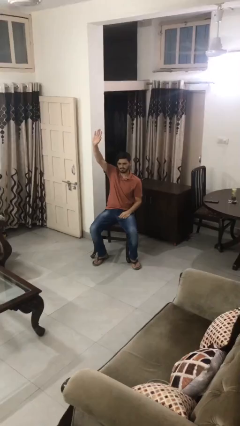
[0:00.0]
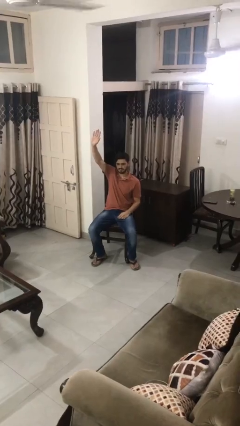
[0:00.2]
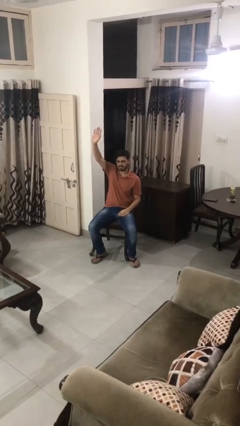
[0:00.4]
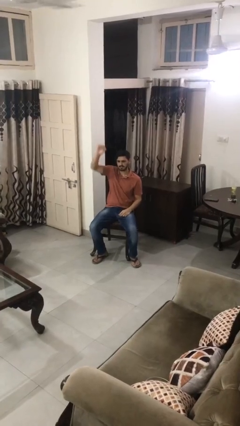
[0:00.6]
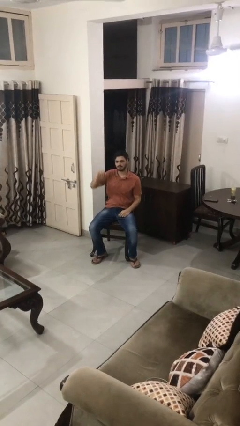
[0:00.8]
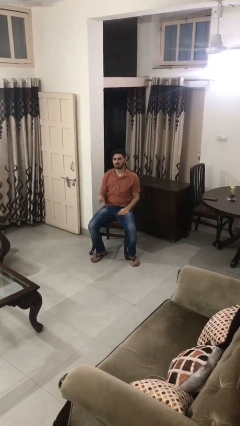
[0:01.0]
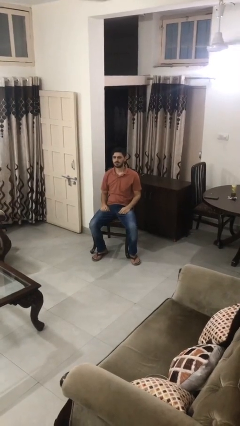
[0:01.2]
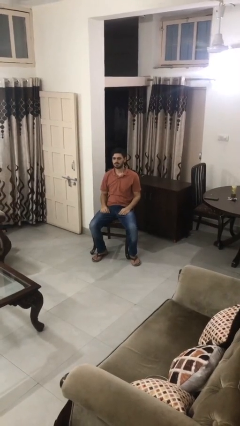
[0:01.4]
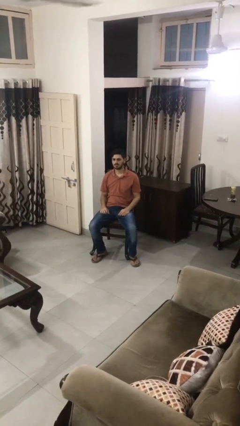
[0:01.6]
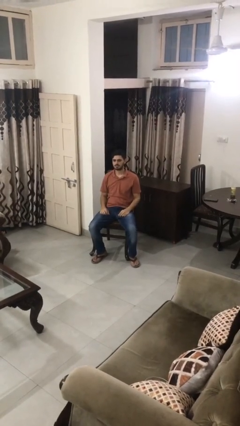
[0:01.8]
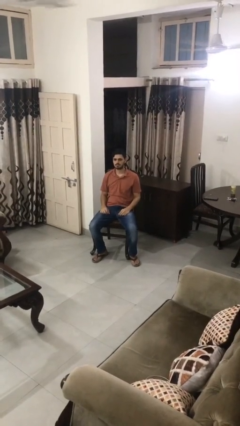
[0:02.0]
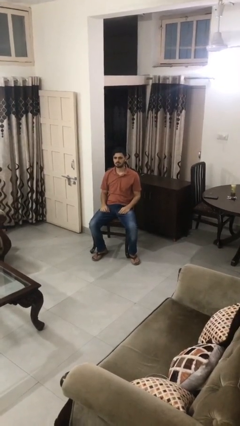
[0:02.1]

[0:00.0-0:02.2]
person gestures lower hand

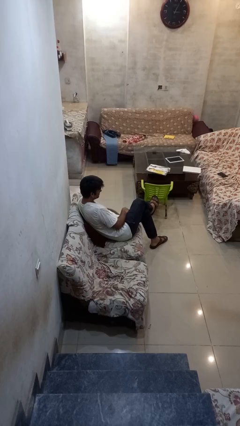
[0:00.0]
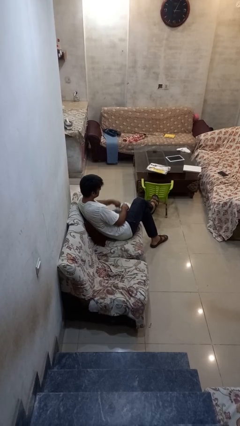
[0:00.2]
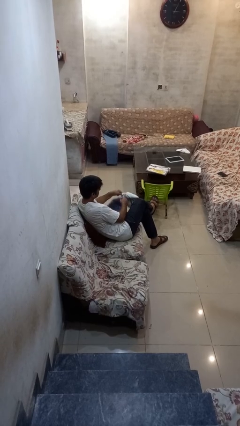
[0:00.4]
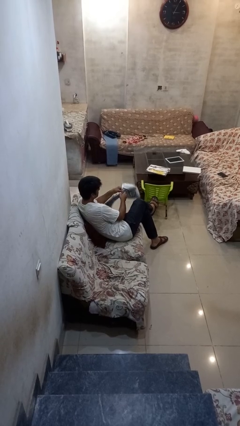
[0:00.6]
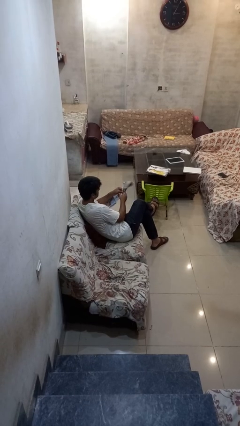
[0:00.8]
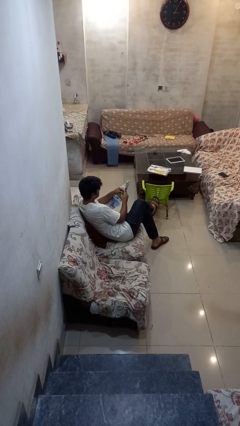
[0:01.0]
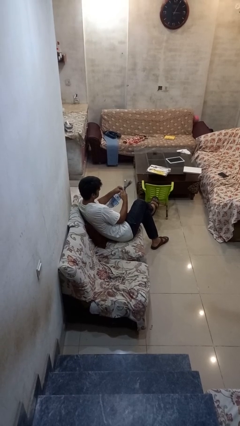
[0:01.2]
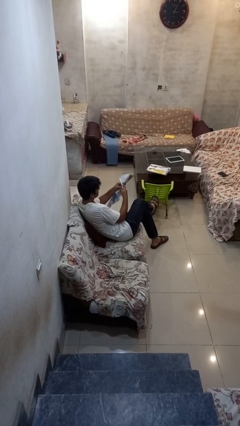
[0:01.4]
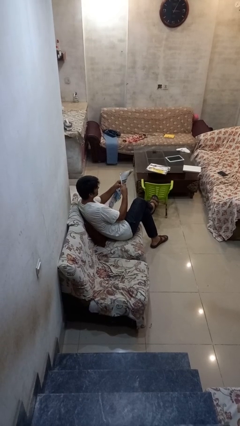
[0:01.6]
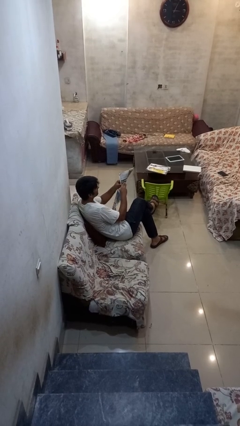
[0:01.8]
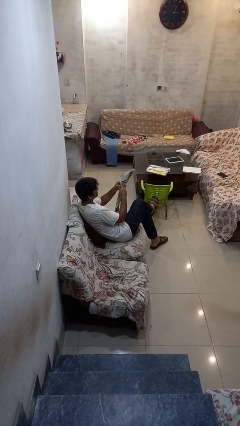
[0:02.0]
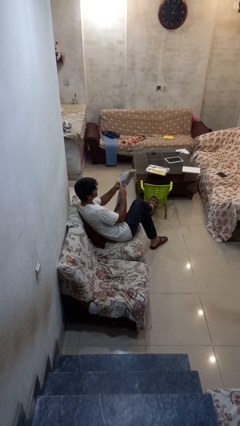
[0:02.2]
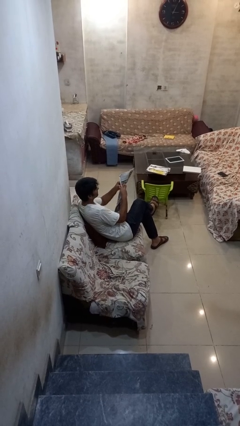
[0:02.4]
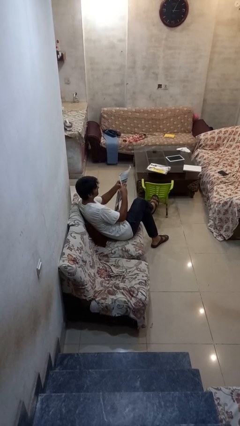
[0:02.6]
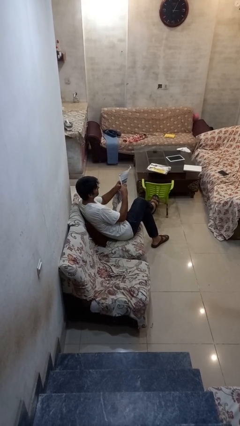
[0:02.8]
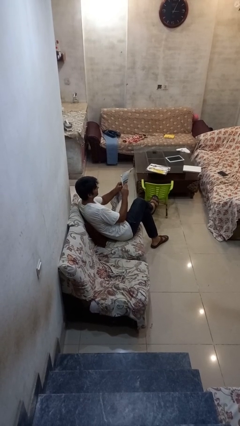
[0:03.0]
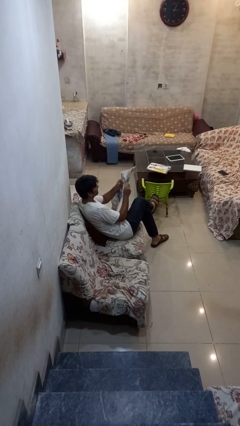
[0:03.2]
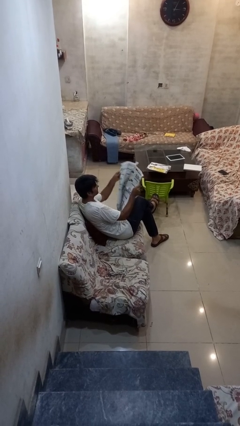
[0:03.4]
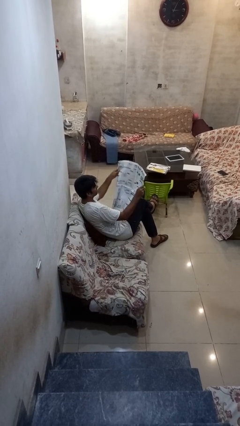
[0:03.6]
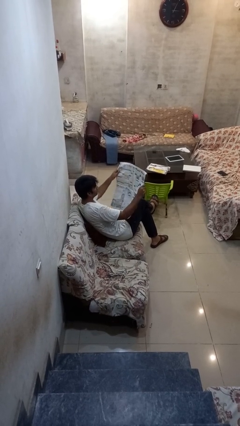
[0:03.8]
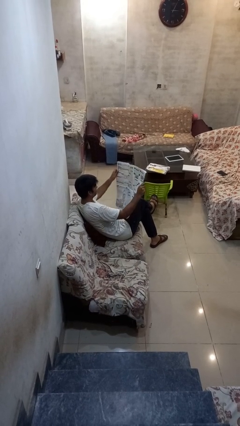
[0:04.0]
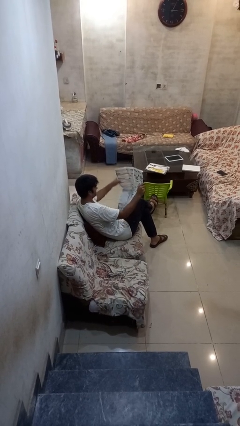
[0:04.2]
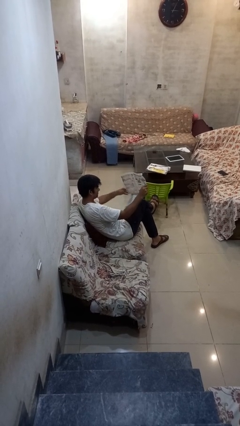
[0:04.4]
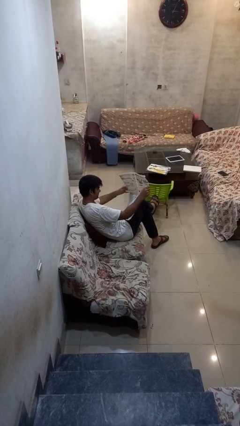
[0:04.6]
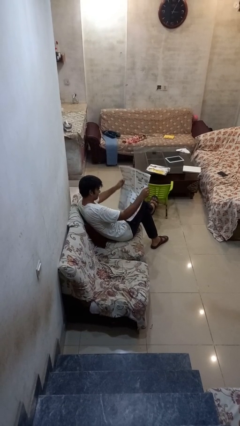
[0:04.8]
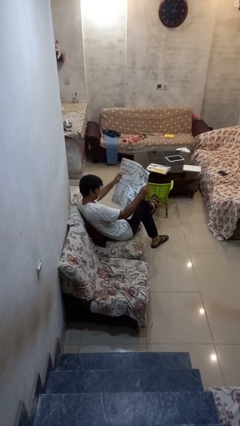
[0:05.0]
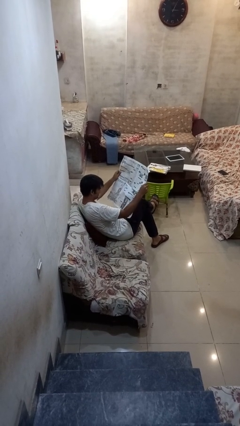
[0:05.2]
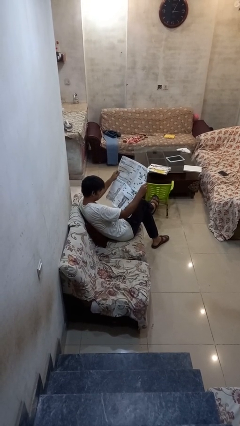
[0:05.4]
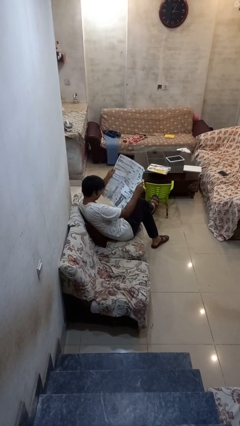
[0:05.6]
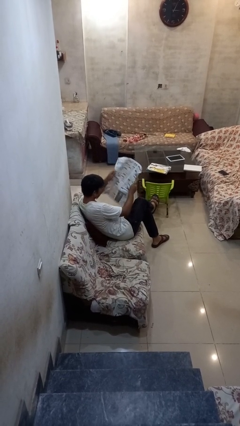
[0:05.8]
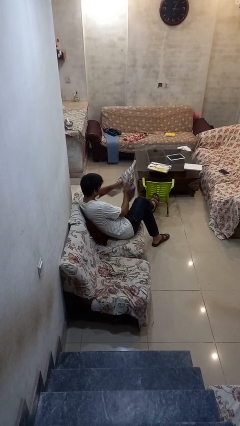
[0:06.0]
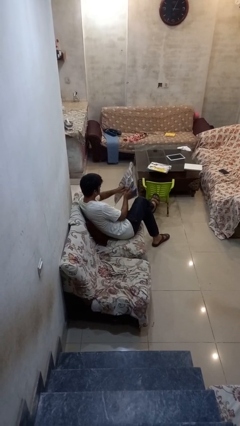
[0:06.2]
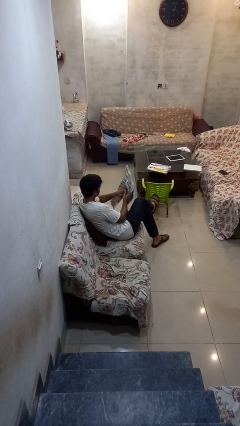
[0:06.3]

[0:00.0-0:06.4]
person reads newspaper

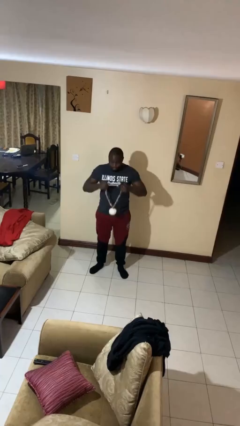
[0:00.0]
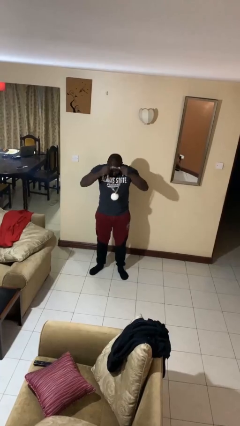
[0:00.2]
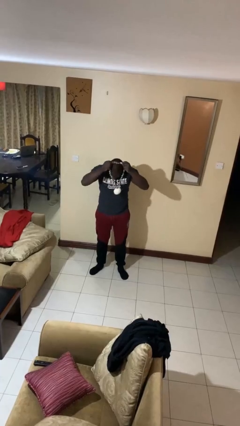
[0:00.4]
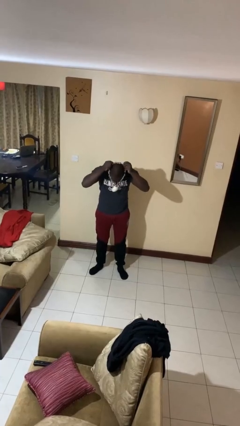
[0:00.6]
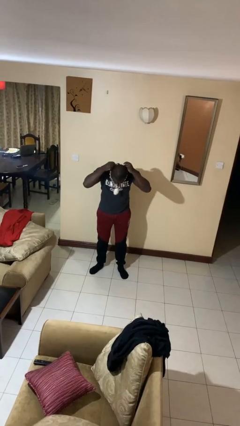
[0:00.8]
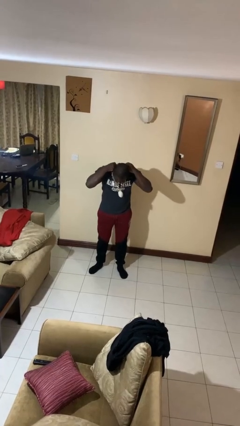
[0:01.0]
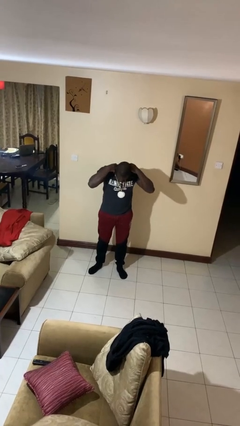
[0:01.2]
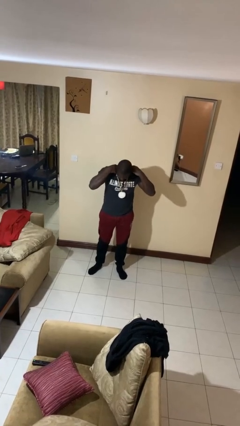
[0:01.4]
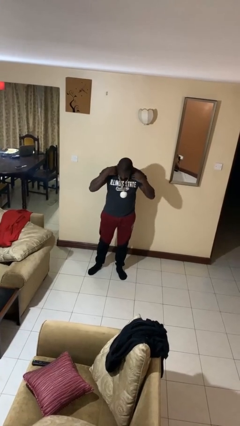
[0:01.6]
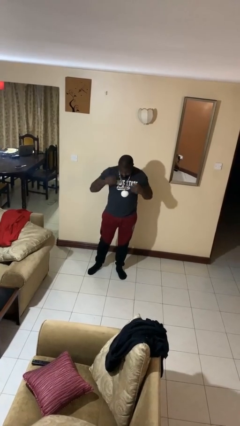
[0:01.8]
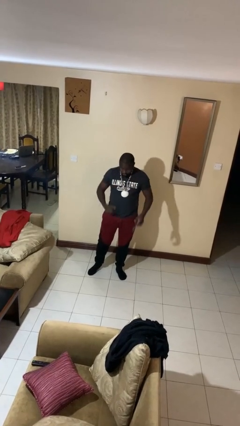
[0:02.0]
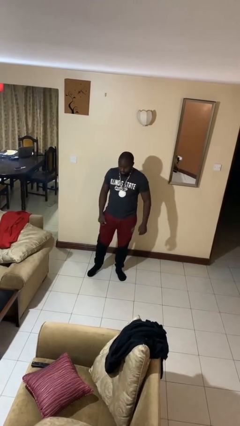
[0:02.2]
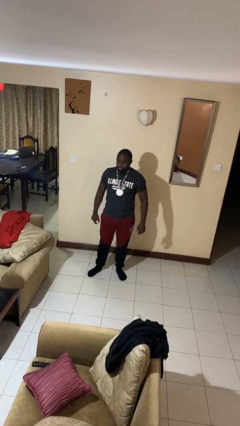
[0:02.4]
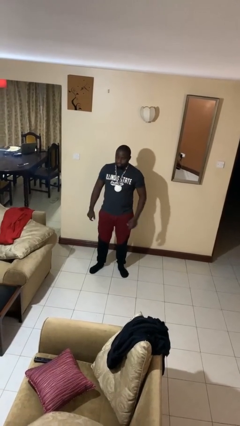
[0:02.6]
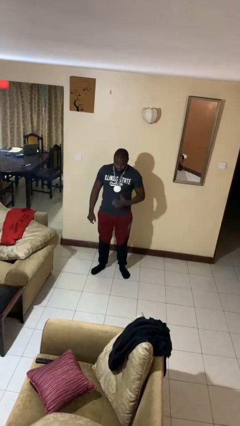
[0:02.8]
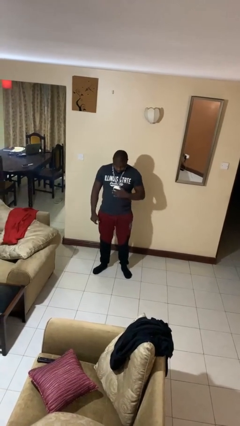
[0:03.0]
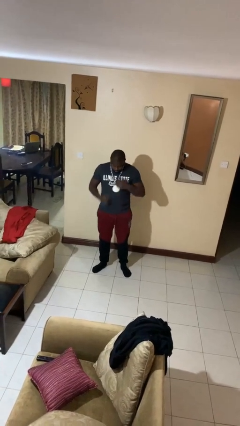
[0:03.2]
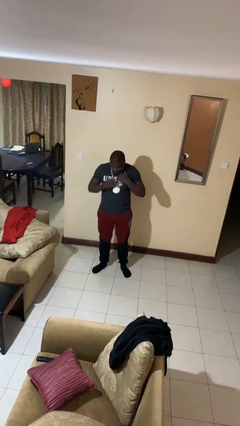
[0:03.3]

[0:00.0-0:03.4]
person puts on necklace

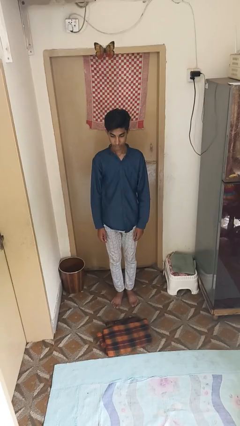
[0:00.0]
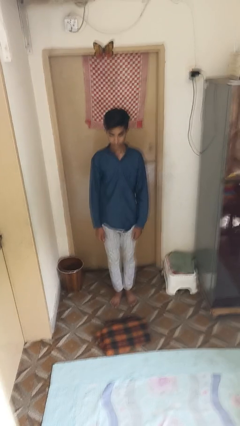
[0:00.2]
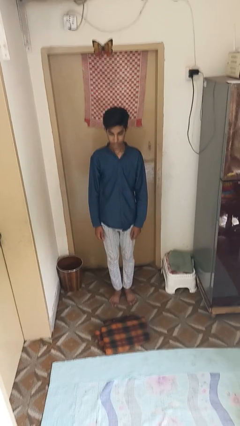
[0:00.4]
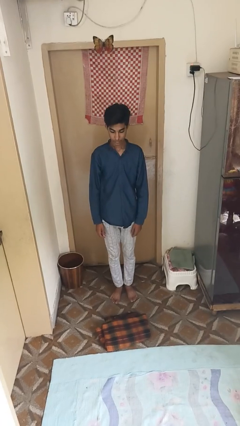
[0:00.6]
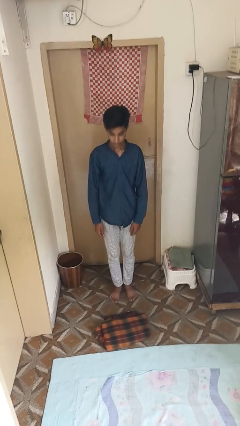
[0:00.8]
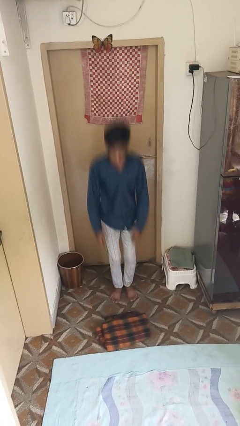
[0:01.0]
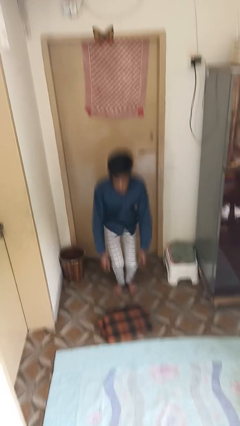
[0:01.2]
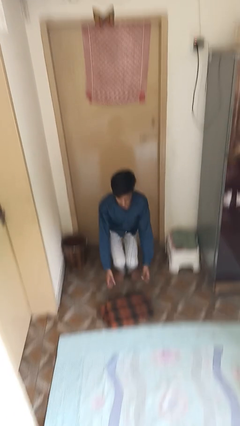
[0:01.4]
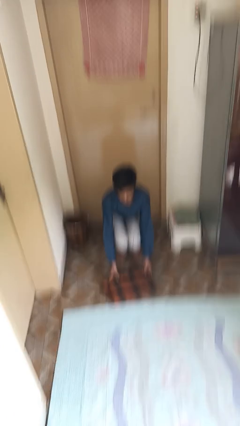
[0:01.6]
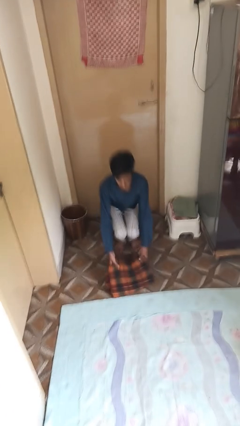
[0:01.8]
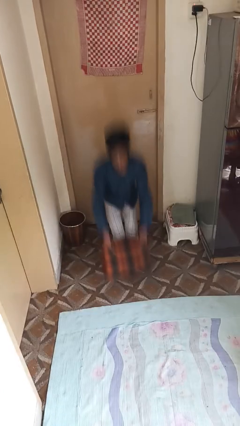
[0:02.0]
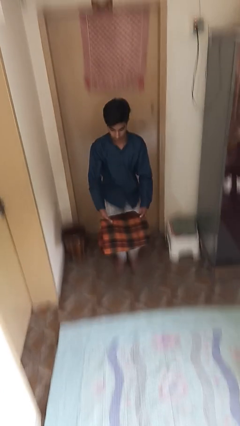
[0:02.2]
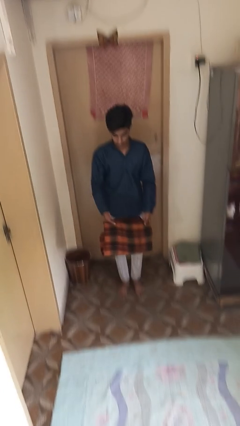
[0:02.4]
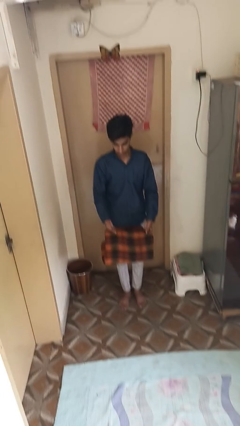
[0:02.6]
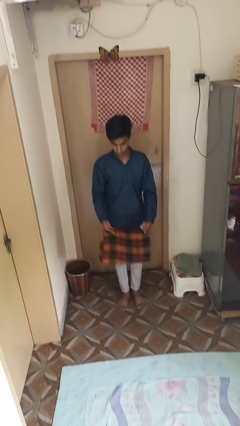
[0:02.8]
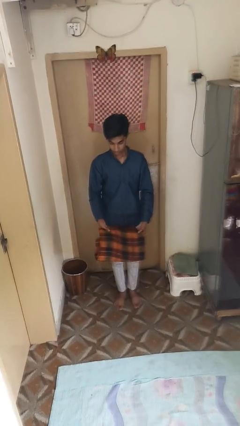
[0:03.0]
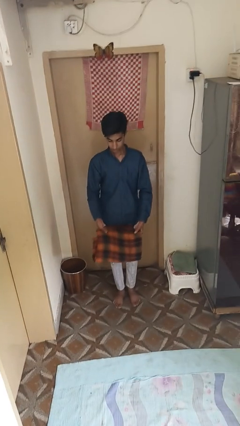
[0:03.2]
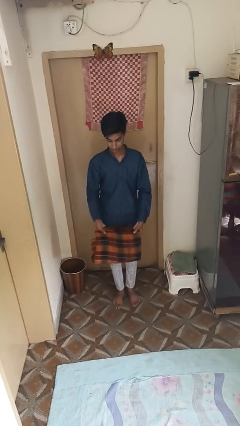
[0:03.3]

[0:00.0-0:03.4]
person picks up object from couch

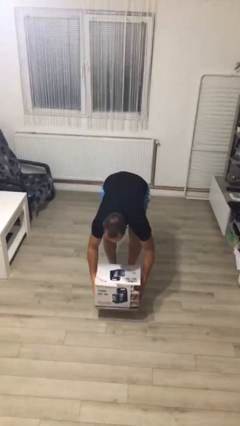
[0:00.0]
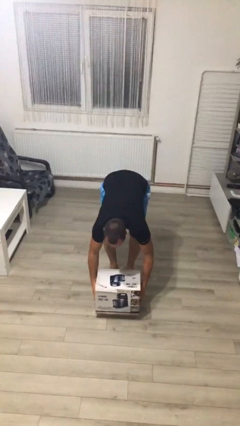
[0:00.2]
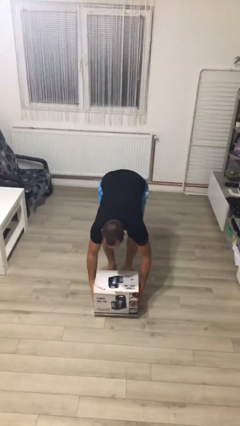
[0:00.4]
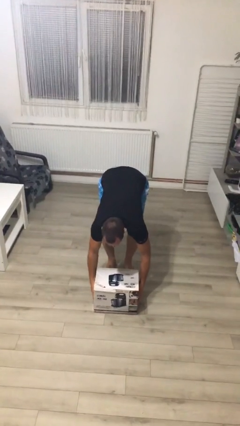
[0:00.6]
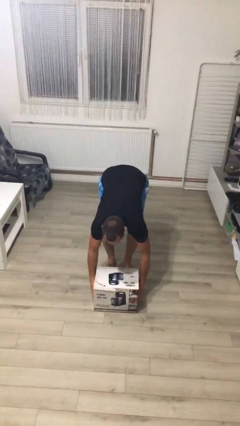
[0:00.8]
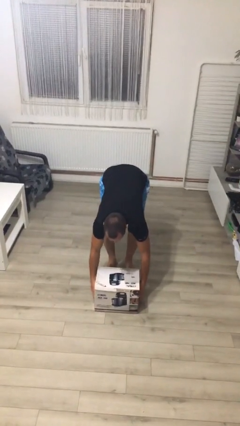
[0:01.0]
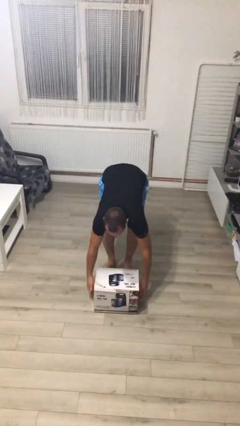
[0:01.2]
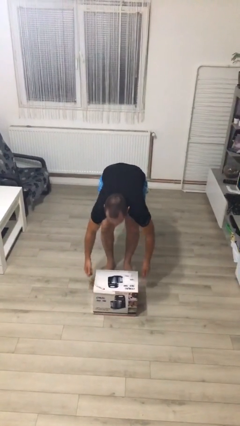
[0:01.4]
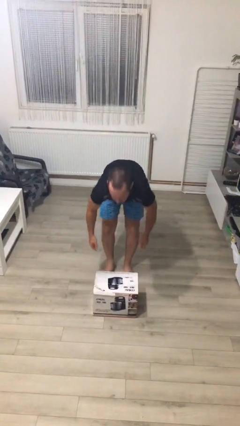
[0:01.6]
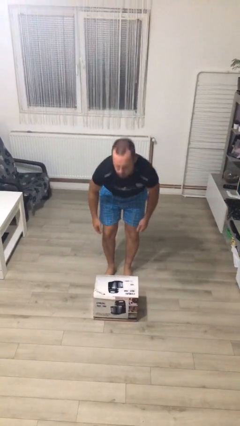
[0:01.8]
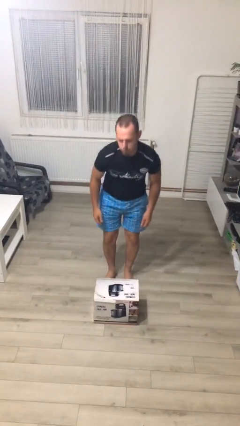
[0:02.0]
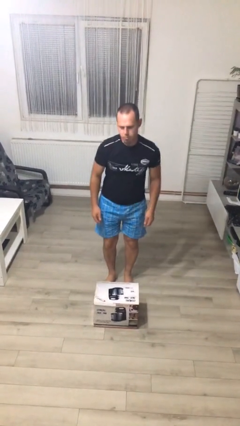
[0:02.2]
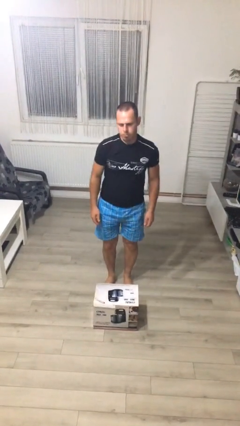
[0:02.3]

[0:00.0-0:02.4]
person puts down object on floor
